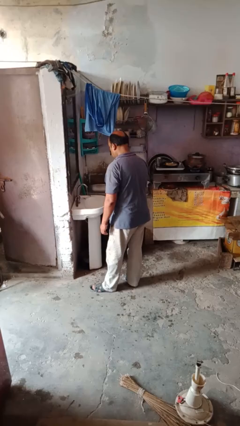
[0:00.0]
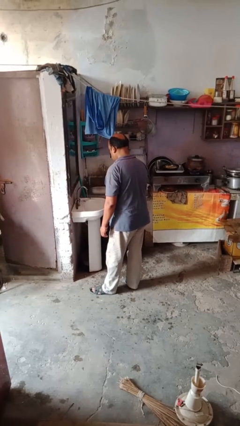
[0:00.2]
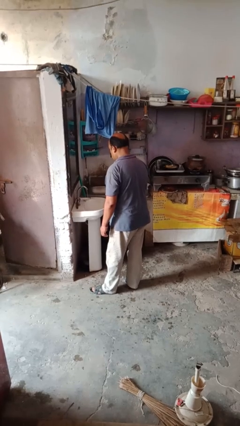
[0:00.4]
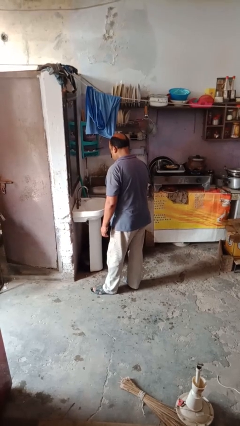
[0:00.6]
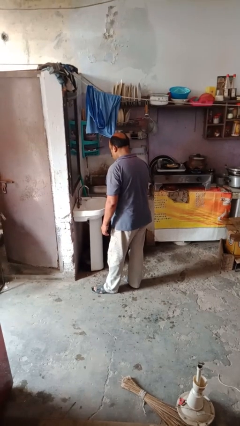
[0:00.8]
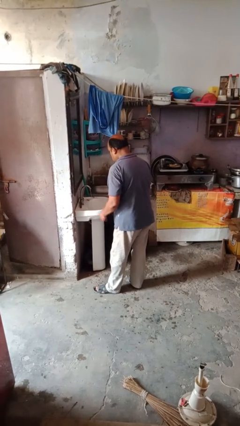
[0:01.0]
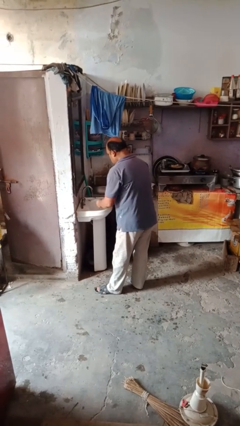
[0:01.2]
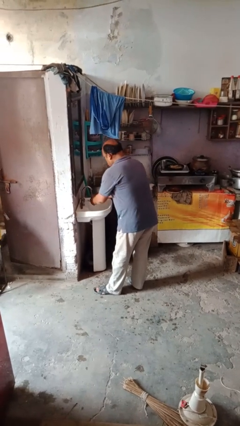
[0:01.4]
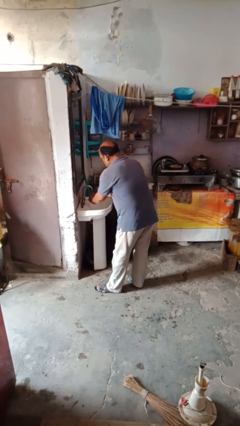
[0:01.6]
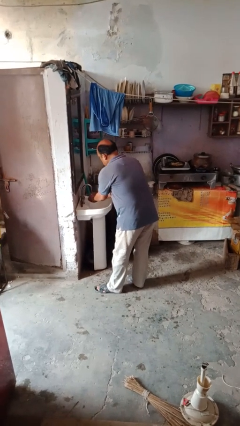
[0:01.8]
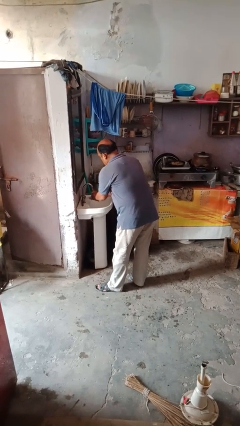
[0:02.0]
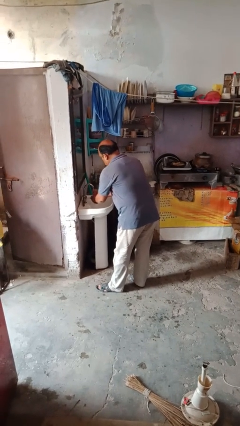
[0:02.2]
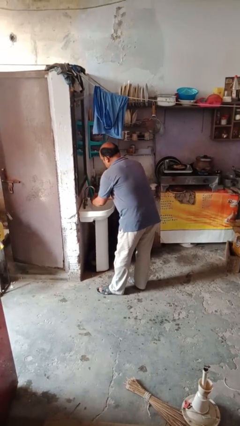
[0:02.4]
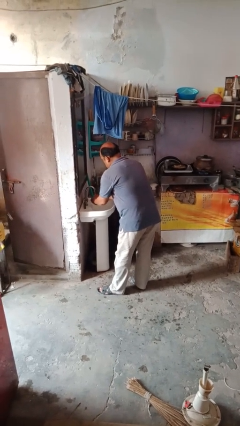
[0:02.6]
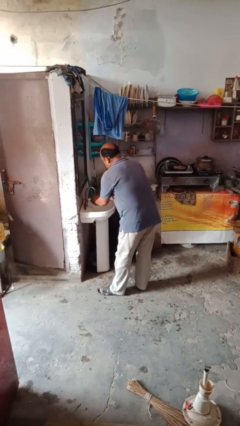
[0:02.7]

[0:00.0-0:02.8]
person washes hands

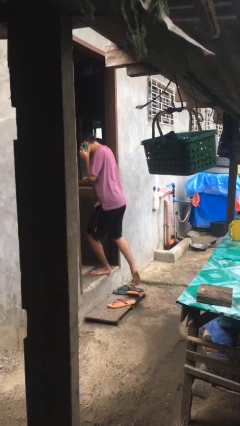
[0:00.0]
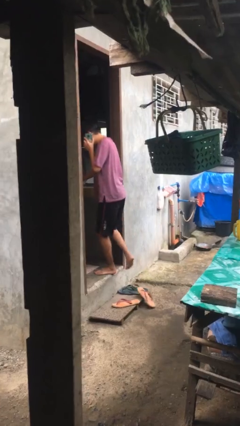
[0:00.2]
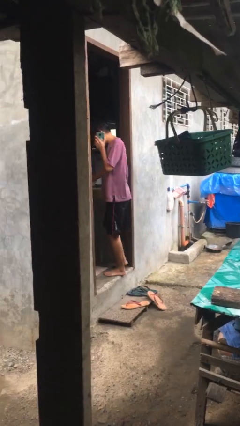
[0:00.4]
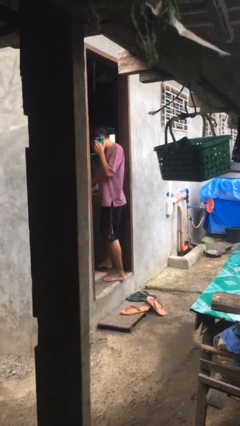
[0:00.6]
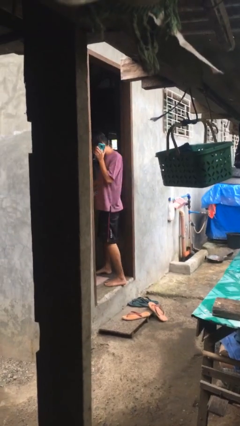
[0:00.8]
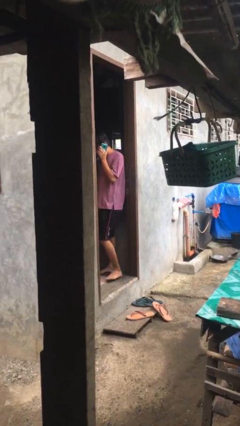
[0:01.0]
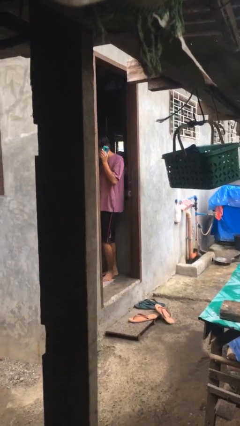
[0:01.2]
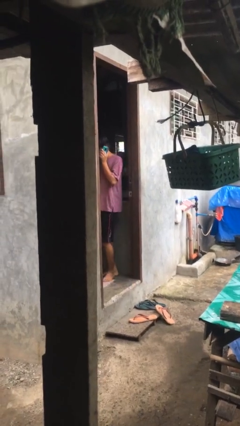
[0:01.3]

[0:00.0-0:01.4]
person exits scene through structure

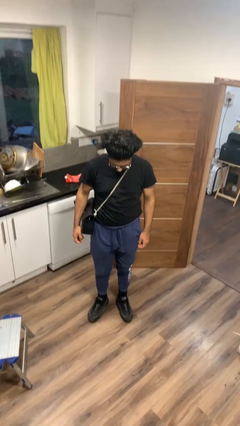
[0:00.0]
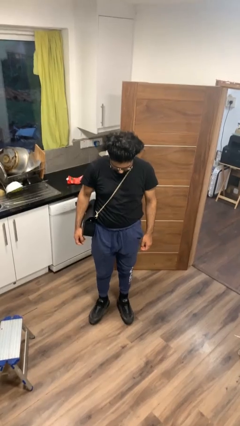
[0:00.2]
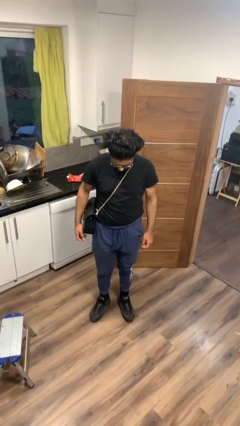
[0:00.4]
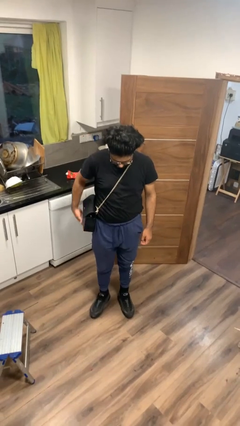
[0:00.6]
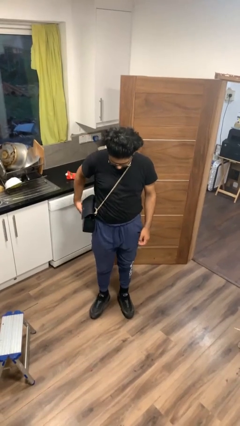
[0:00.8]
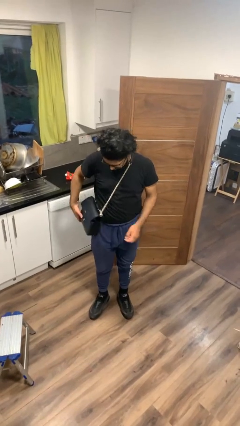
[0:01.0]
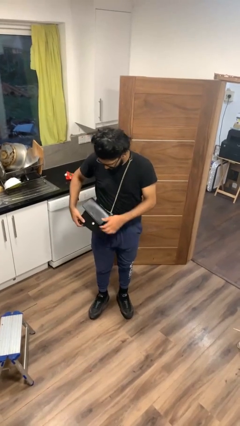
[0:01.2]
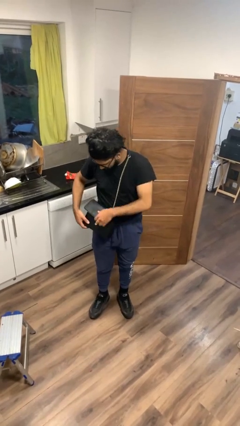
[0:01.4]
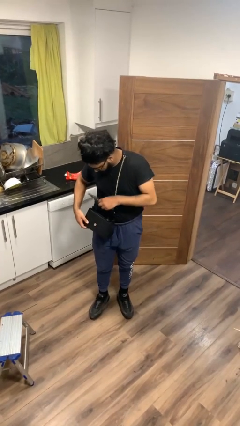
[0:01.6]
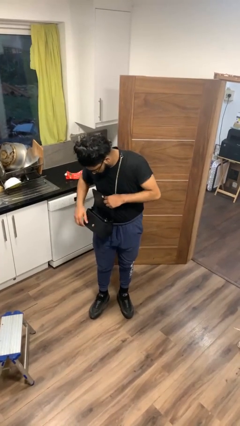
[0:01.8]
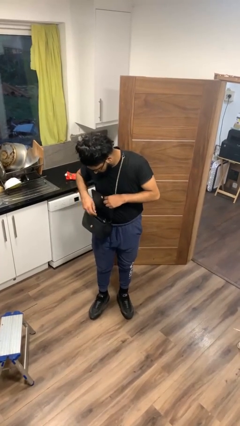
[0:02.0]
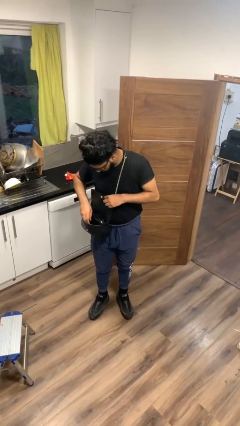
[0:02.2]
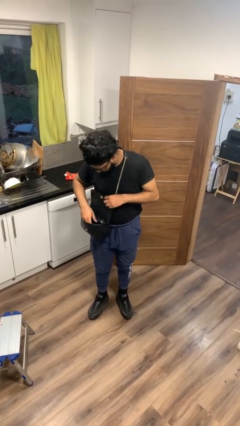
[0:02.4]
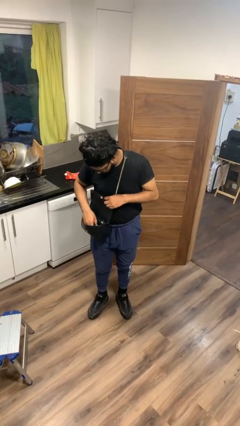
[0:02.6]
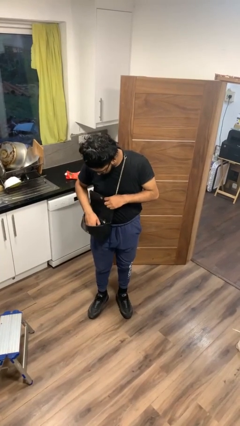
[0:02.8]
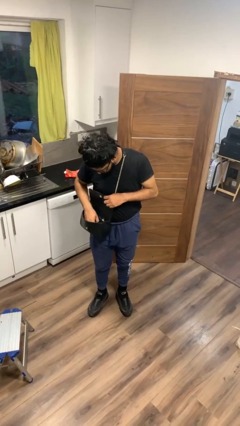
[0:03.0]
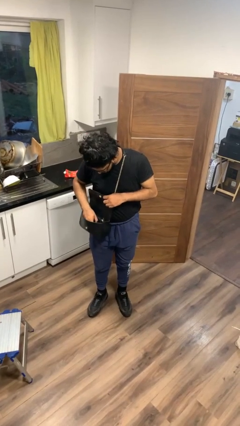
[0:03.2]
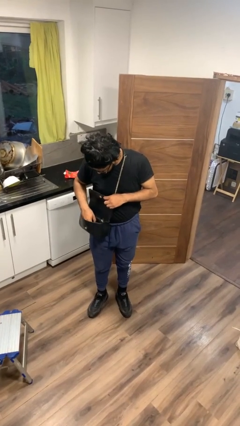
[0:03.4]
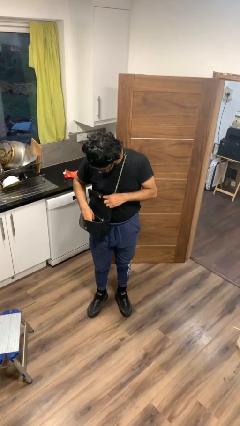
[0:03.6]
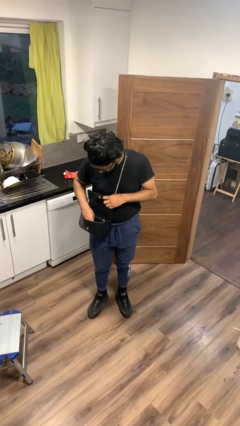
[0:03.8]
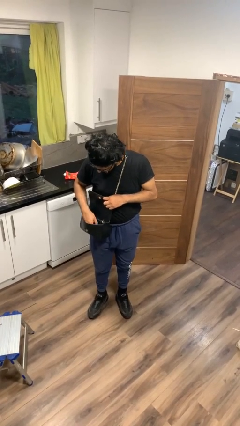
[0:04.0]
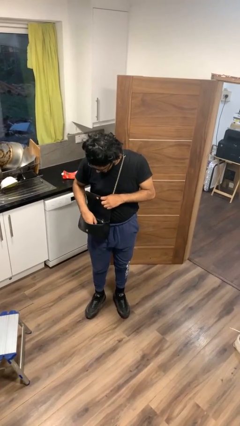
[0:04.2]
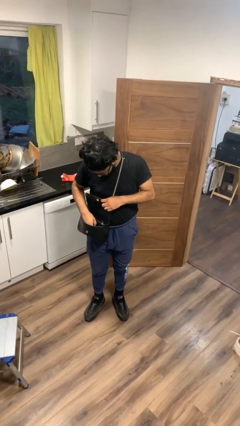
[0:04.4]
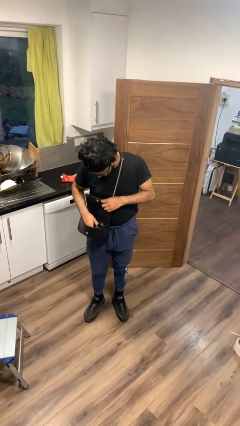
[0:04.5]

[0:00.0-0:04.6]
person searches in purse

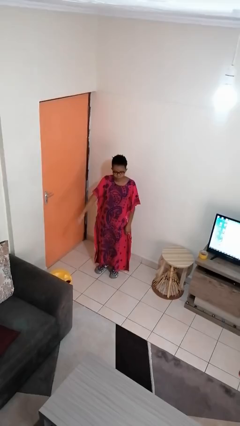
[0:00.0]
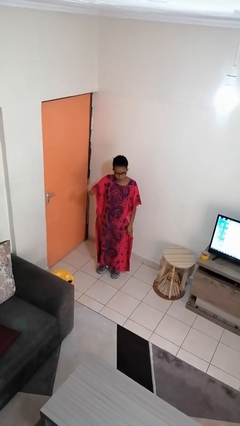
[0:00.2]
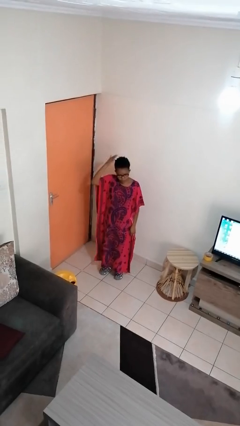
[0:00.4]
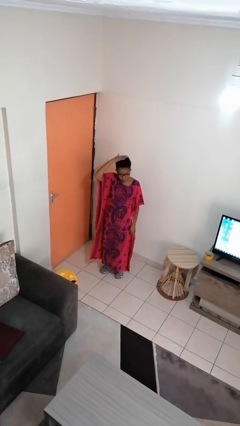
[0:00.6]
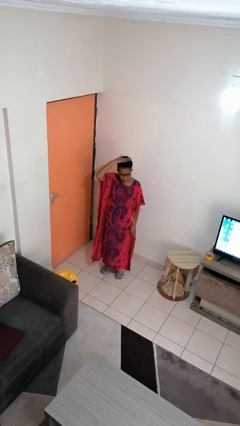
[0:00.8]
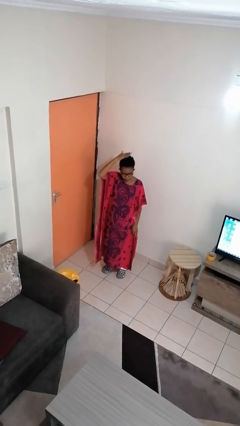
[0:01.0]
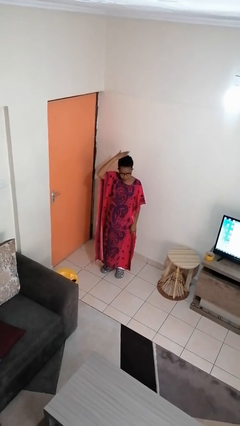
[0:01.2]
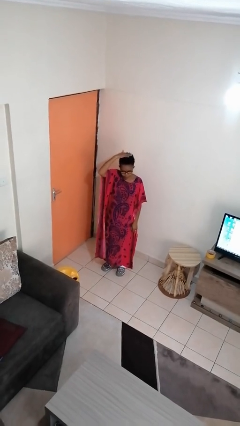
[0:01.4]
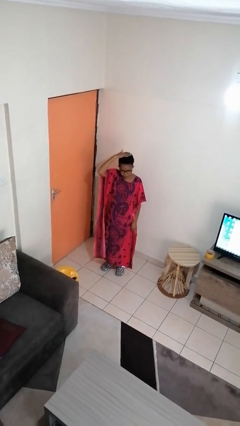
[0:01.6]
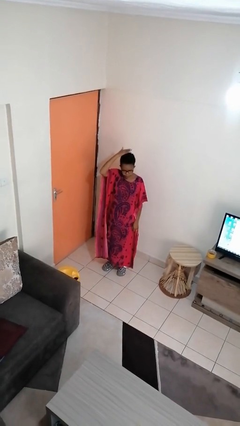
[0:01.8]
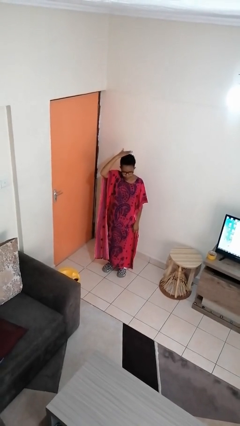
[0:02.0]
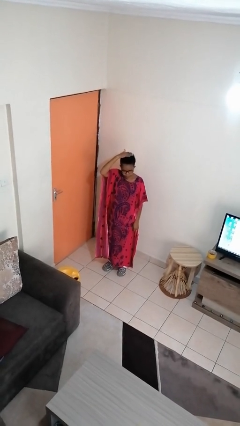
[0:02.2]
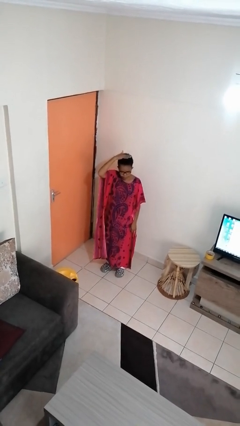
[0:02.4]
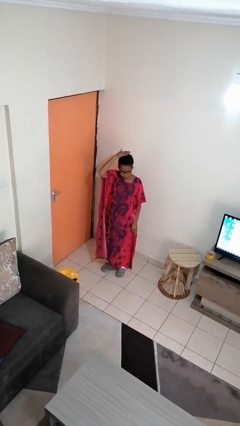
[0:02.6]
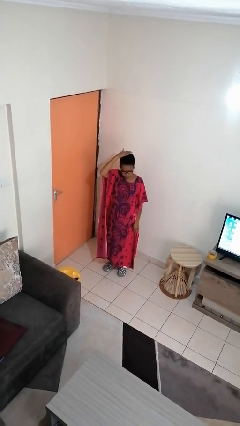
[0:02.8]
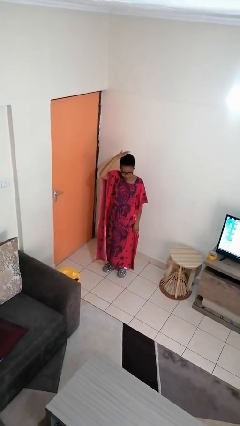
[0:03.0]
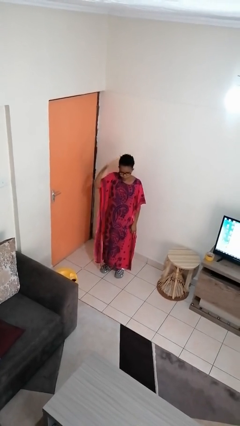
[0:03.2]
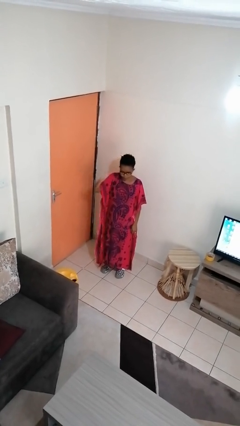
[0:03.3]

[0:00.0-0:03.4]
person pats head

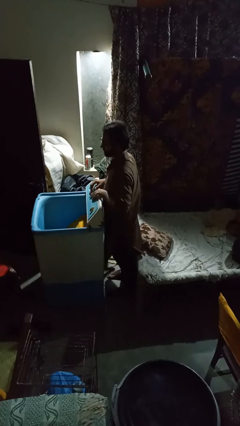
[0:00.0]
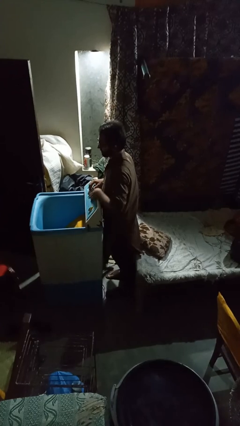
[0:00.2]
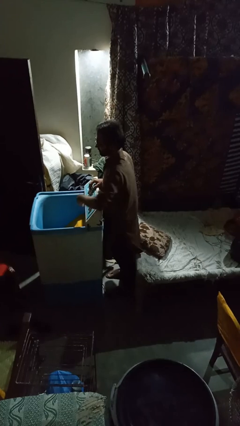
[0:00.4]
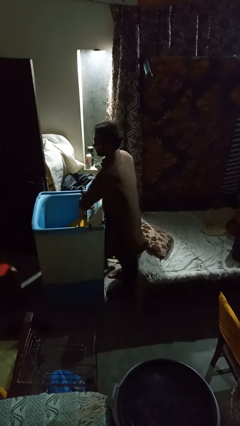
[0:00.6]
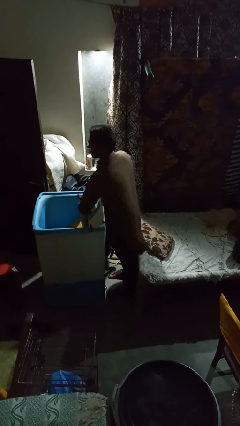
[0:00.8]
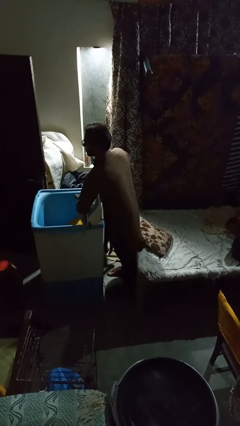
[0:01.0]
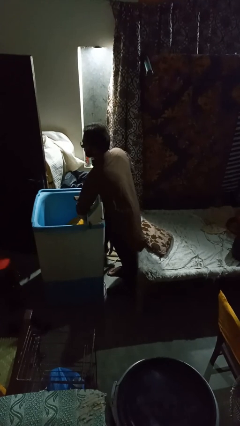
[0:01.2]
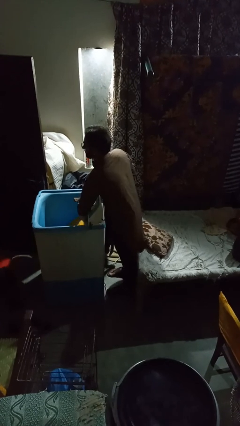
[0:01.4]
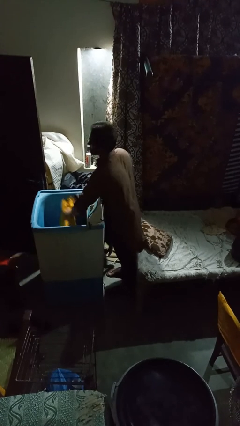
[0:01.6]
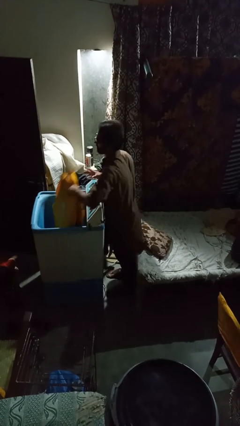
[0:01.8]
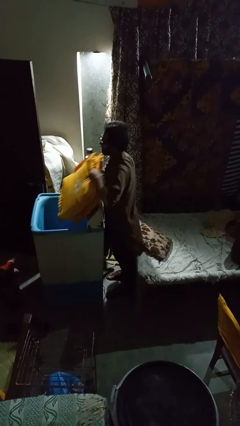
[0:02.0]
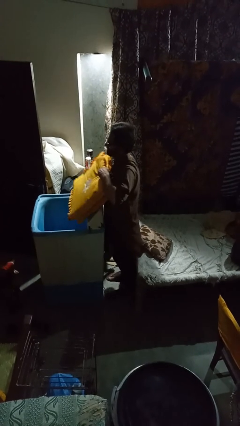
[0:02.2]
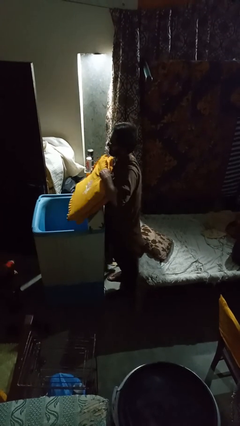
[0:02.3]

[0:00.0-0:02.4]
person unloads clotheswasher

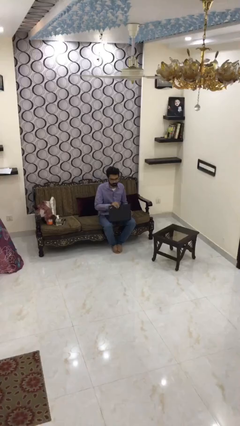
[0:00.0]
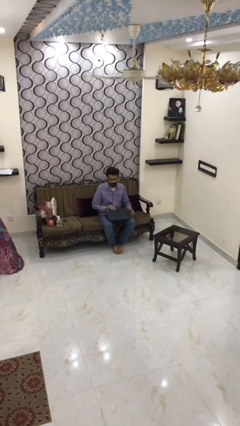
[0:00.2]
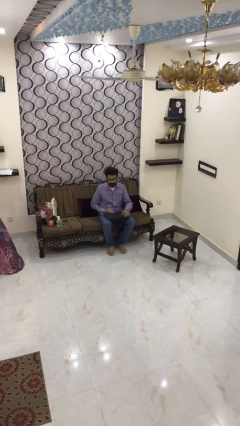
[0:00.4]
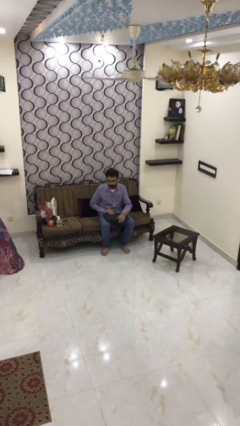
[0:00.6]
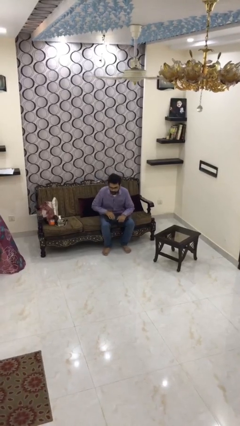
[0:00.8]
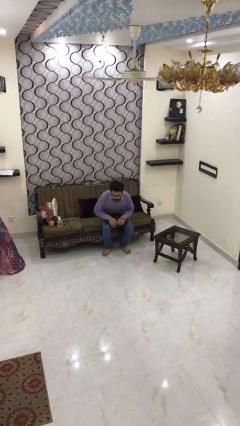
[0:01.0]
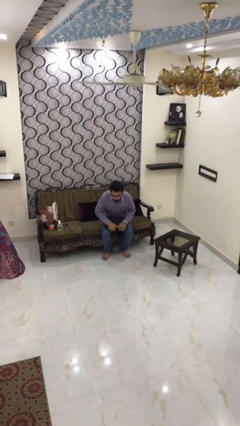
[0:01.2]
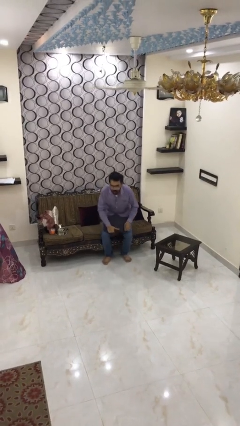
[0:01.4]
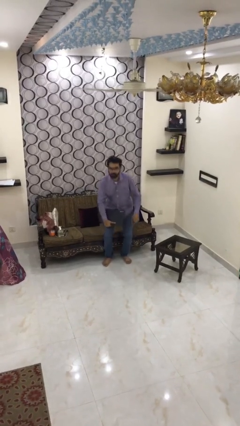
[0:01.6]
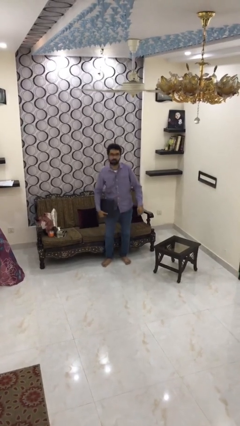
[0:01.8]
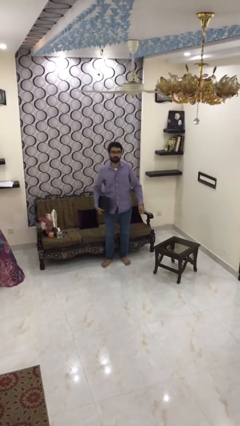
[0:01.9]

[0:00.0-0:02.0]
person stands up

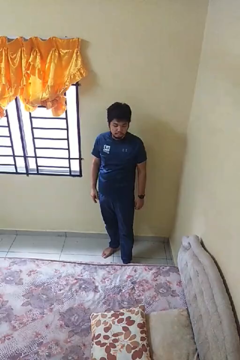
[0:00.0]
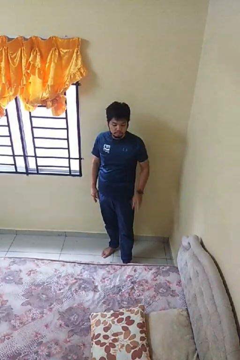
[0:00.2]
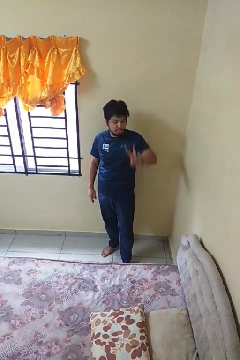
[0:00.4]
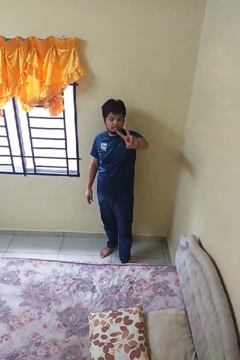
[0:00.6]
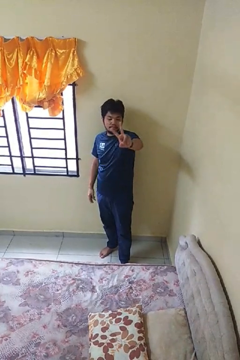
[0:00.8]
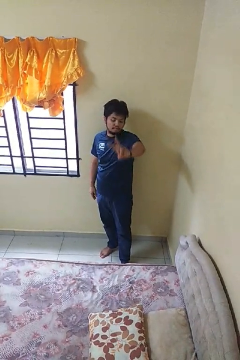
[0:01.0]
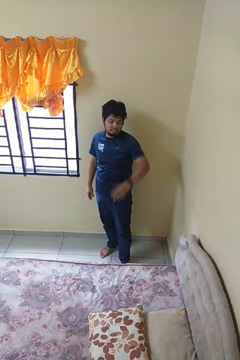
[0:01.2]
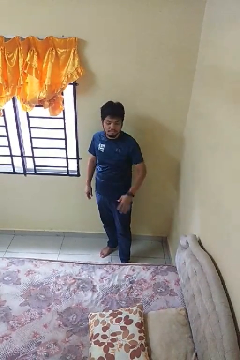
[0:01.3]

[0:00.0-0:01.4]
person gestures peace
